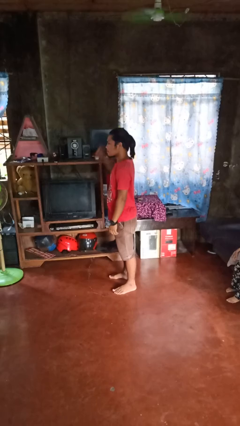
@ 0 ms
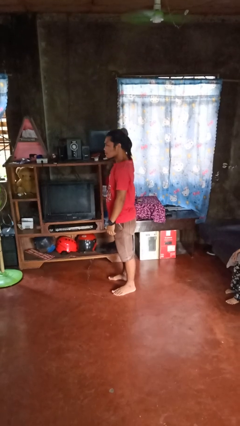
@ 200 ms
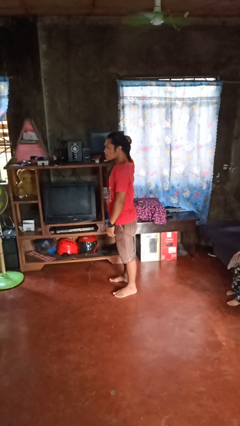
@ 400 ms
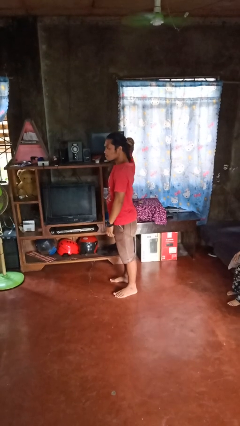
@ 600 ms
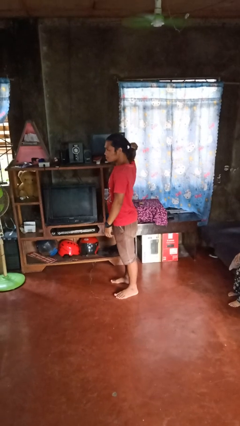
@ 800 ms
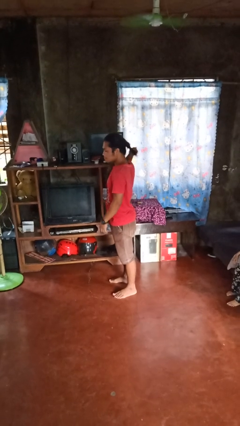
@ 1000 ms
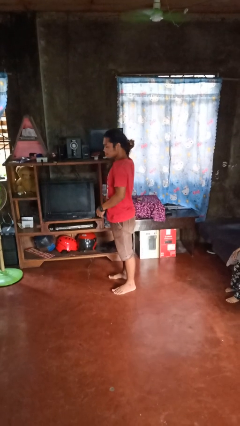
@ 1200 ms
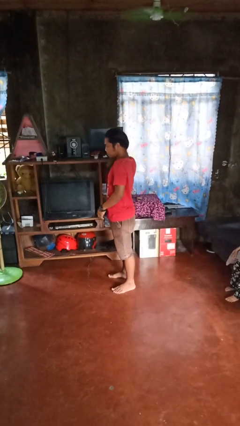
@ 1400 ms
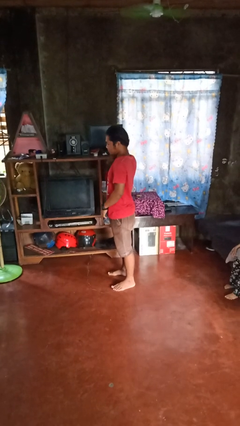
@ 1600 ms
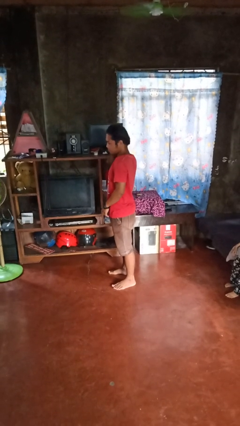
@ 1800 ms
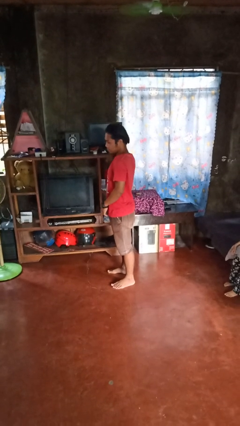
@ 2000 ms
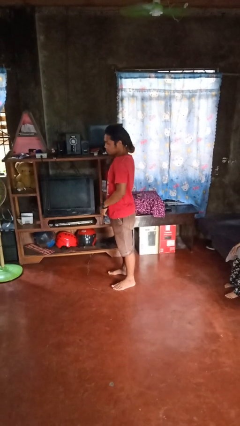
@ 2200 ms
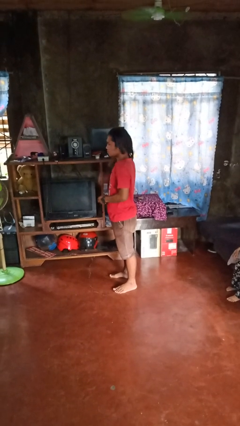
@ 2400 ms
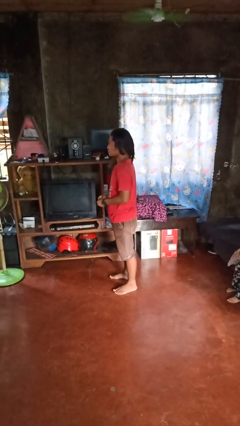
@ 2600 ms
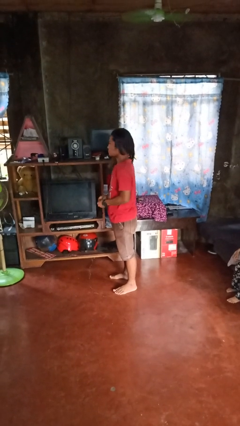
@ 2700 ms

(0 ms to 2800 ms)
person takes off hairtie

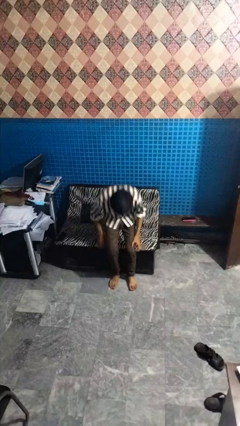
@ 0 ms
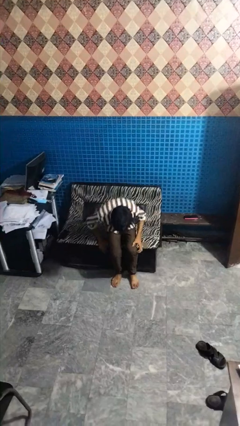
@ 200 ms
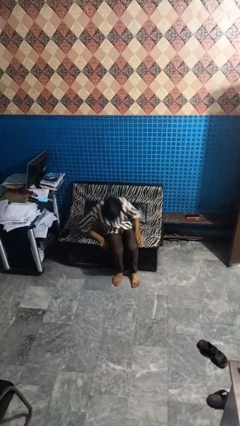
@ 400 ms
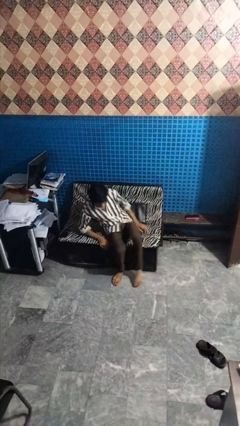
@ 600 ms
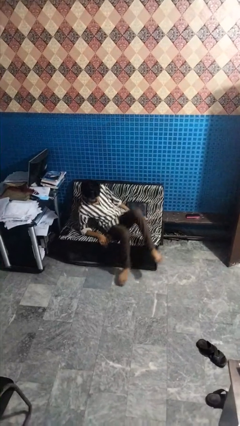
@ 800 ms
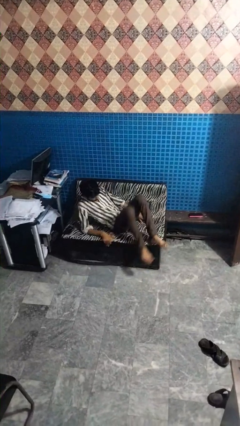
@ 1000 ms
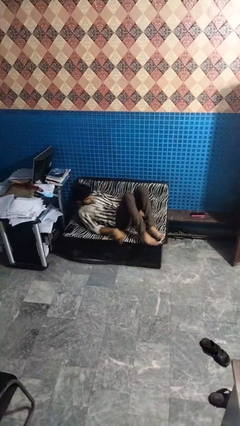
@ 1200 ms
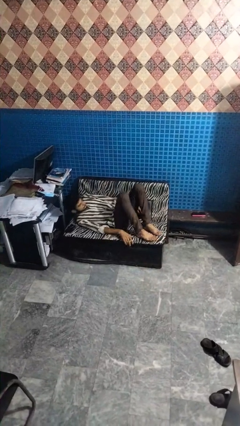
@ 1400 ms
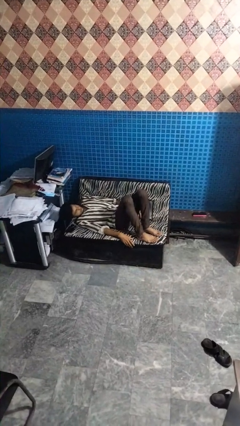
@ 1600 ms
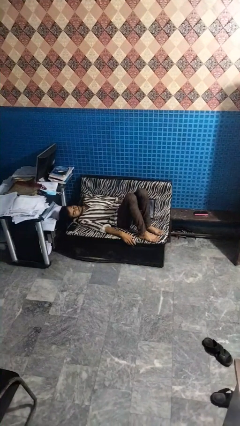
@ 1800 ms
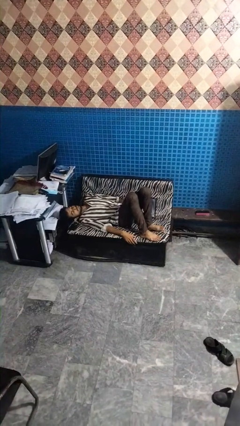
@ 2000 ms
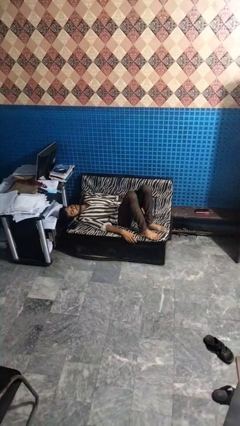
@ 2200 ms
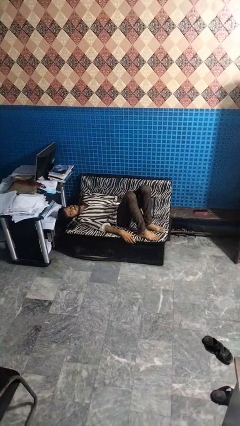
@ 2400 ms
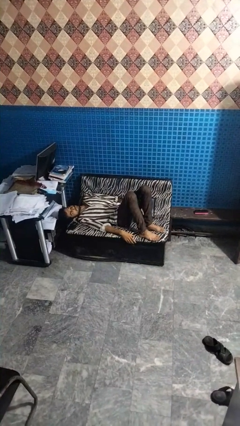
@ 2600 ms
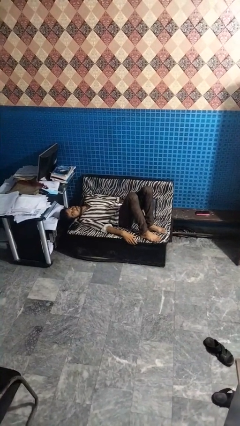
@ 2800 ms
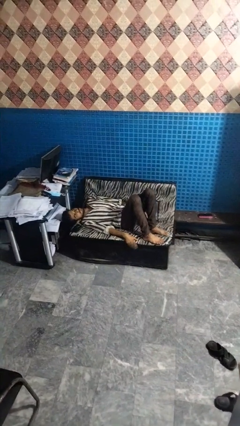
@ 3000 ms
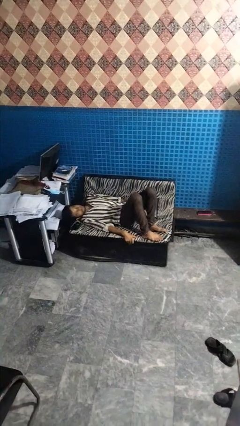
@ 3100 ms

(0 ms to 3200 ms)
person lies down on couch

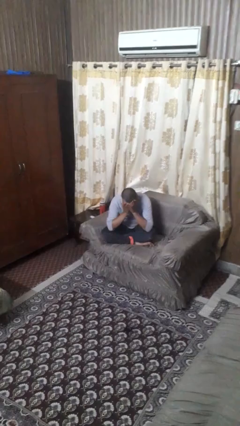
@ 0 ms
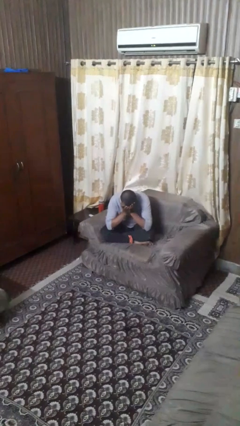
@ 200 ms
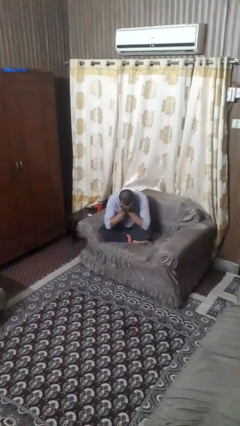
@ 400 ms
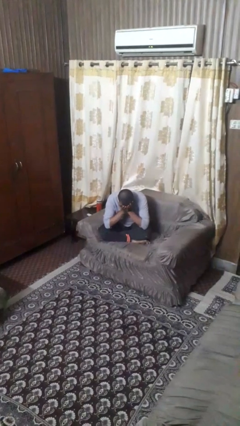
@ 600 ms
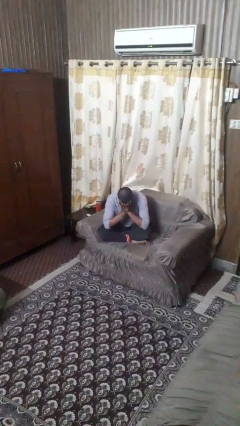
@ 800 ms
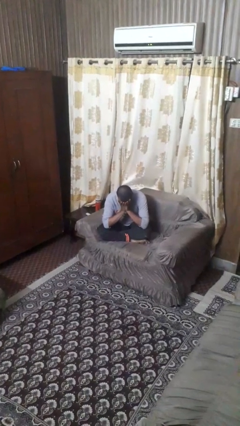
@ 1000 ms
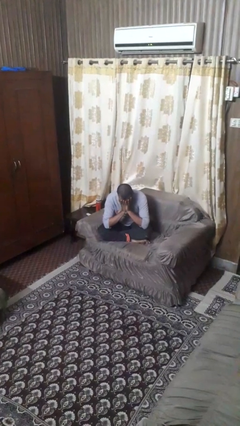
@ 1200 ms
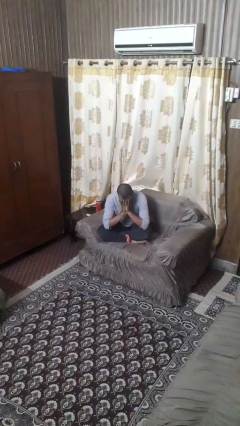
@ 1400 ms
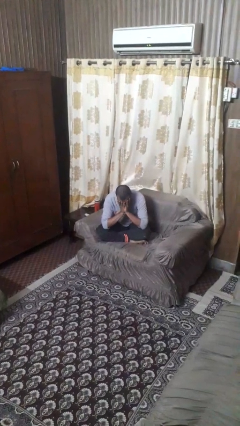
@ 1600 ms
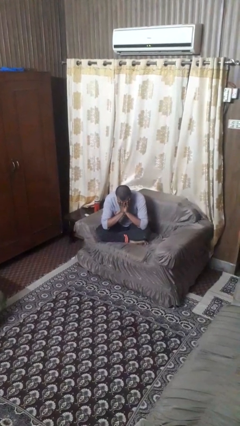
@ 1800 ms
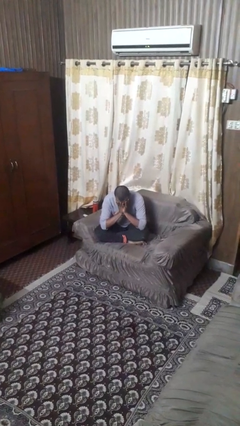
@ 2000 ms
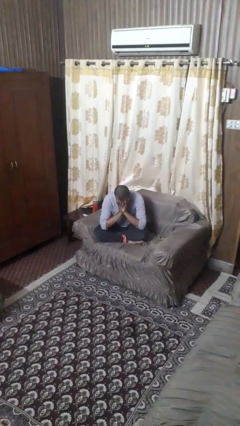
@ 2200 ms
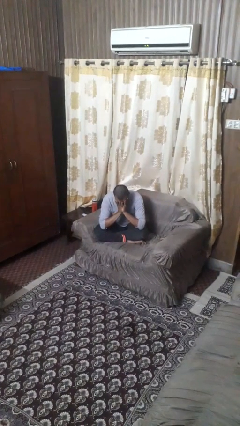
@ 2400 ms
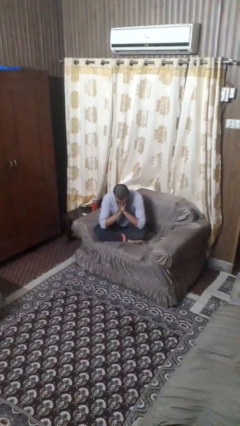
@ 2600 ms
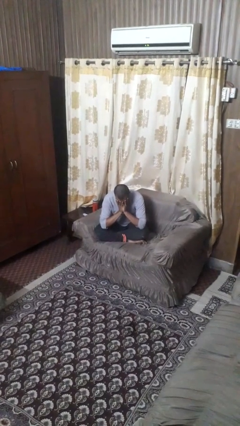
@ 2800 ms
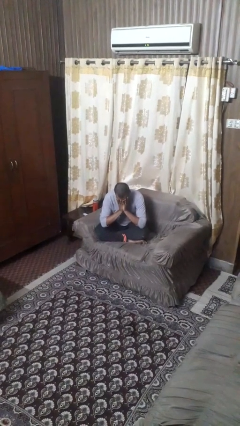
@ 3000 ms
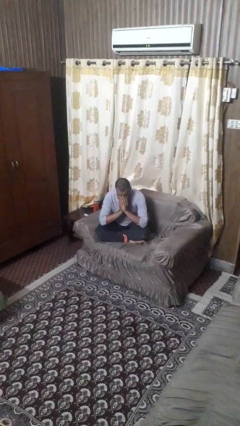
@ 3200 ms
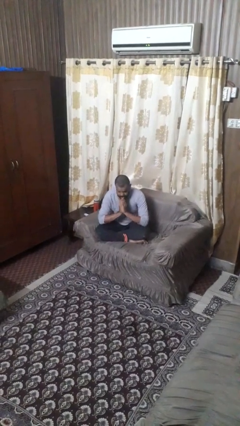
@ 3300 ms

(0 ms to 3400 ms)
person covers face with hands

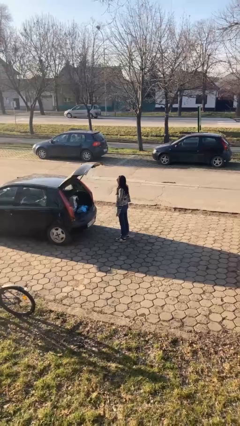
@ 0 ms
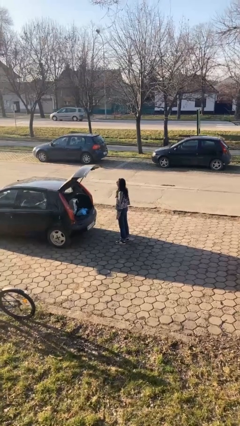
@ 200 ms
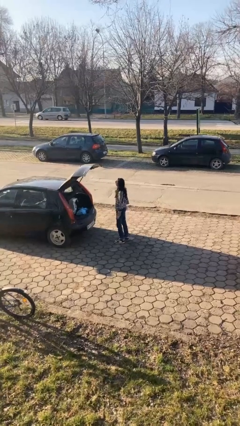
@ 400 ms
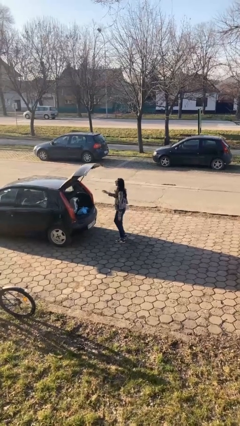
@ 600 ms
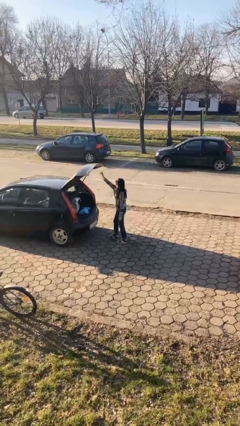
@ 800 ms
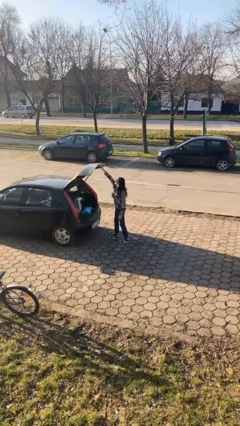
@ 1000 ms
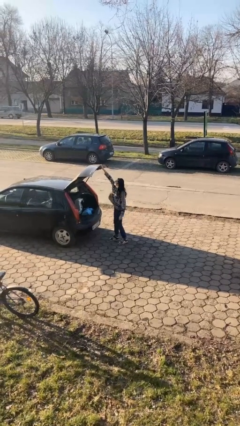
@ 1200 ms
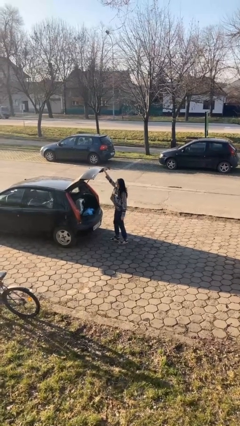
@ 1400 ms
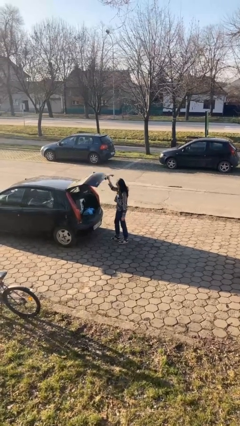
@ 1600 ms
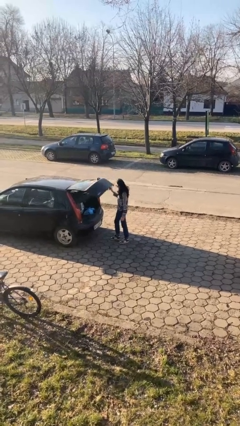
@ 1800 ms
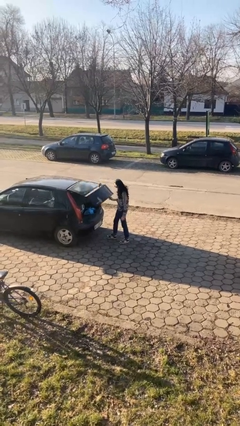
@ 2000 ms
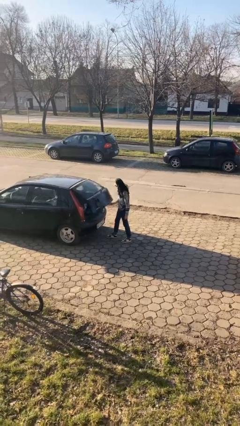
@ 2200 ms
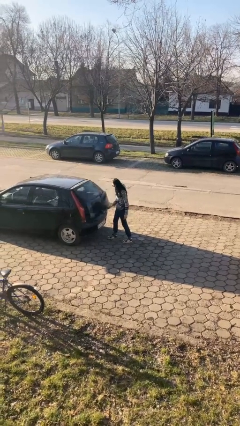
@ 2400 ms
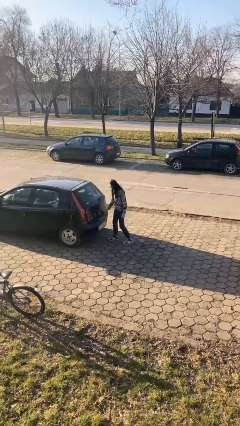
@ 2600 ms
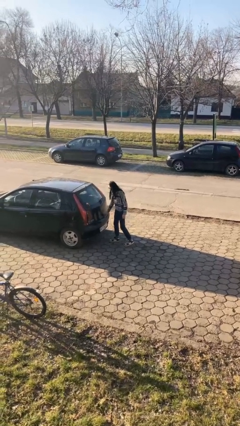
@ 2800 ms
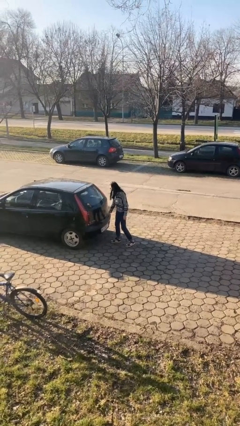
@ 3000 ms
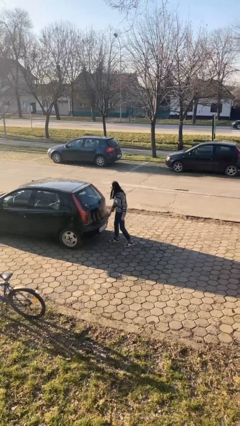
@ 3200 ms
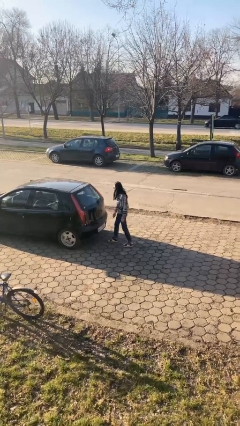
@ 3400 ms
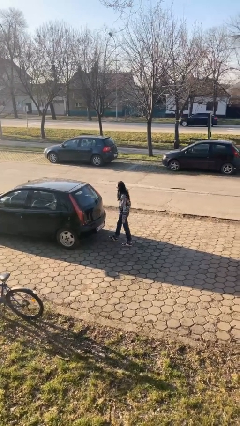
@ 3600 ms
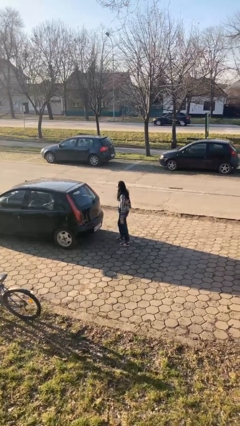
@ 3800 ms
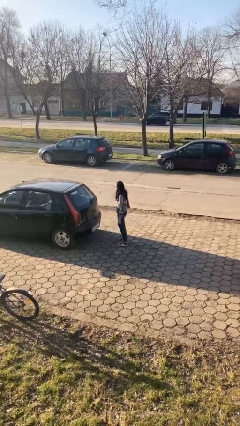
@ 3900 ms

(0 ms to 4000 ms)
person closes car trunk

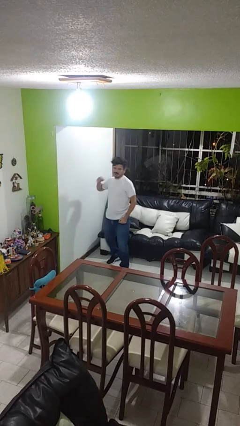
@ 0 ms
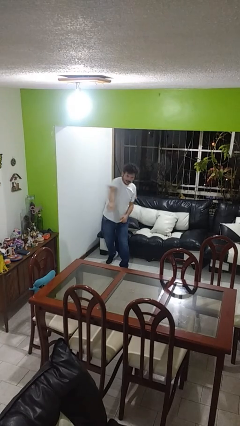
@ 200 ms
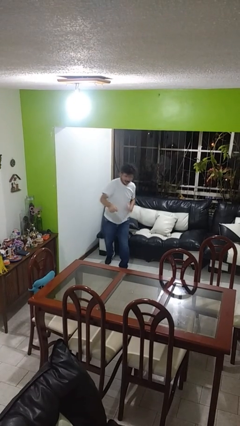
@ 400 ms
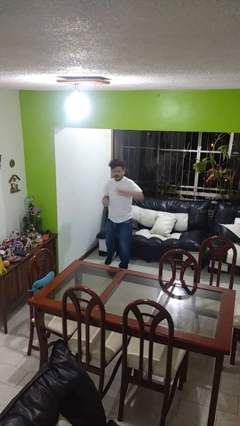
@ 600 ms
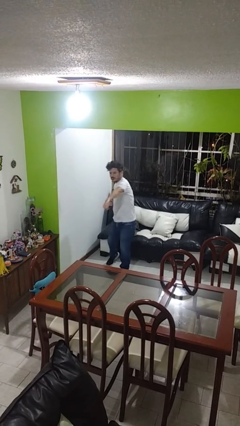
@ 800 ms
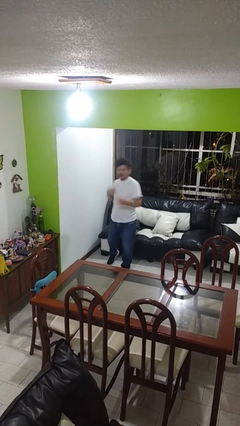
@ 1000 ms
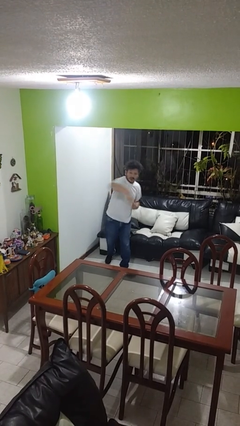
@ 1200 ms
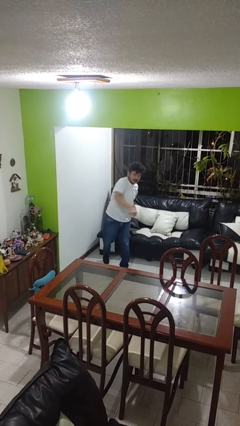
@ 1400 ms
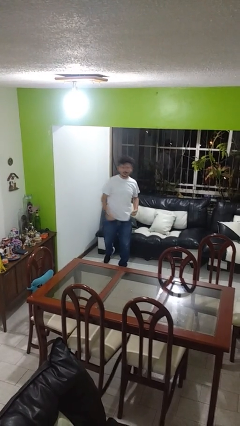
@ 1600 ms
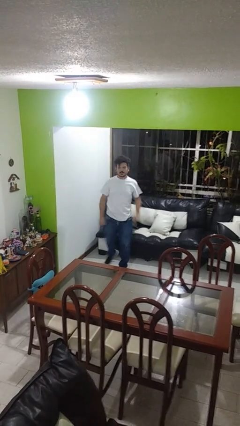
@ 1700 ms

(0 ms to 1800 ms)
person punches

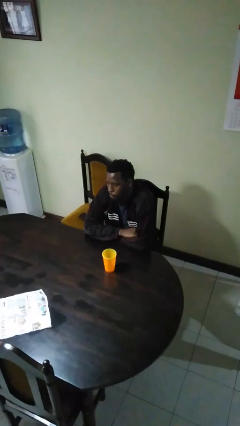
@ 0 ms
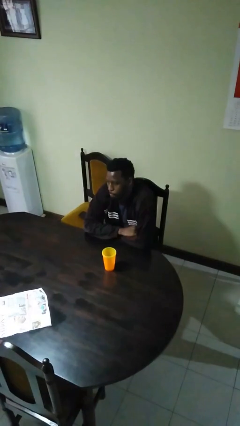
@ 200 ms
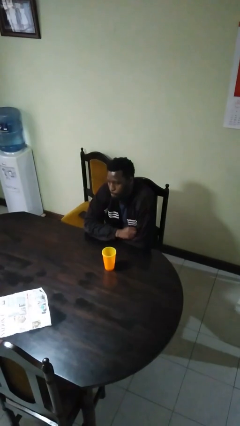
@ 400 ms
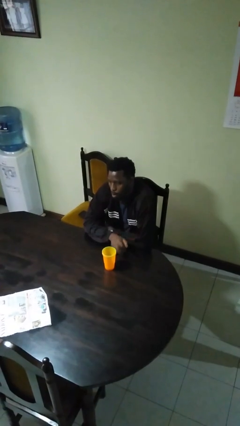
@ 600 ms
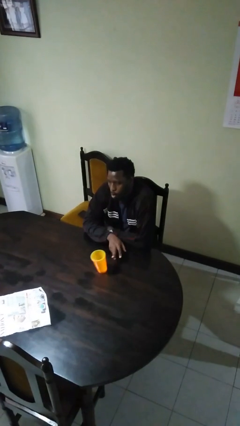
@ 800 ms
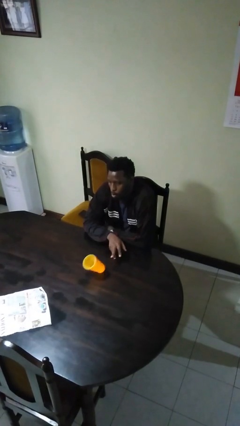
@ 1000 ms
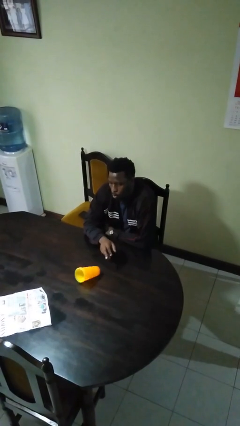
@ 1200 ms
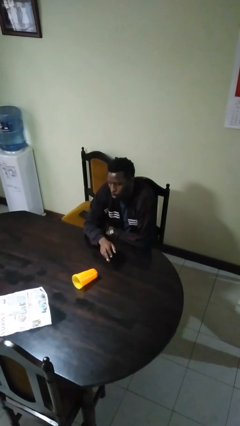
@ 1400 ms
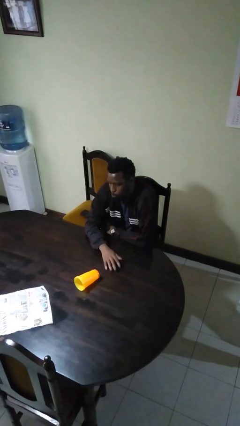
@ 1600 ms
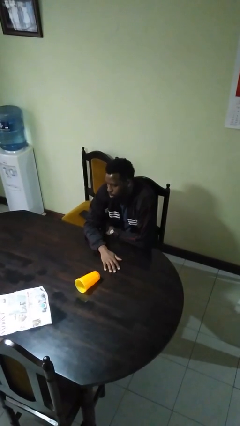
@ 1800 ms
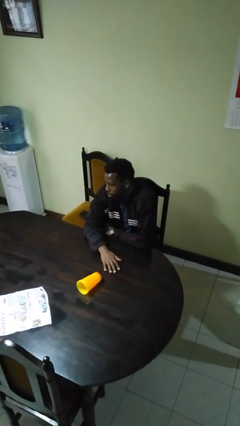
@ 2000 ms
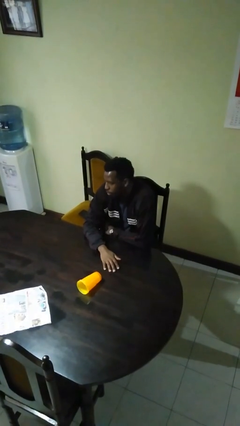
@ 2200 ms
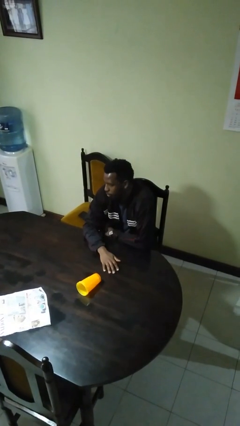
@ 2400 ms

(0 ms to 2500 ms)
person knocks over glass
